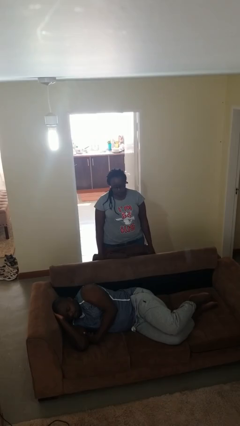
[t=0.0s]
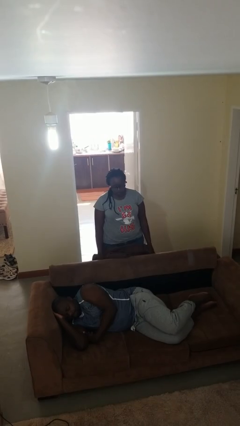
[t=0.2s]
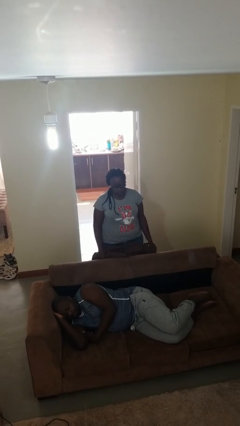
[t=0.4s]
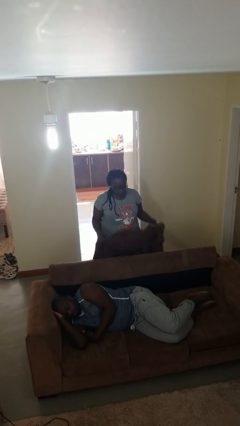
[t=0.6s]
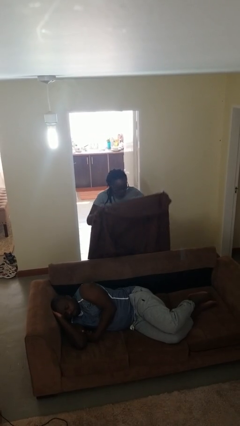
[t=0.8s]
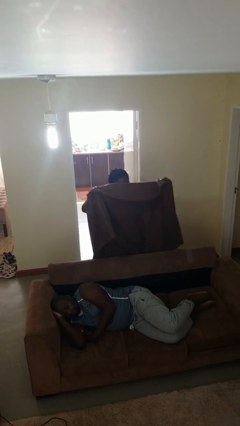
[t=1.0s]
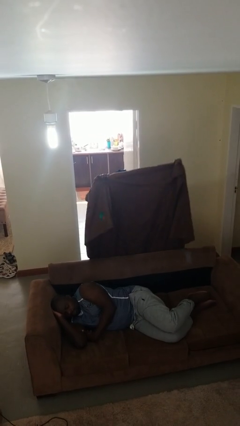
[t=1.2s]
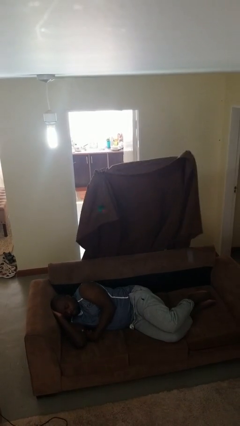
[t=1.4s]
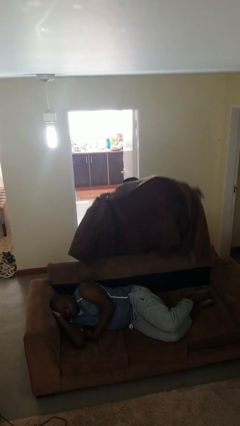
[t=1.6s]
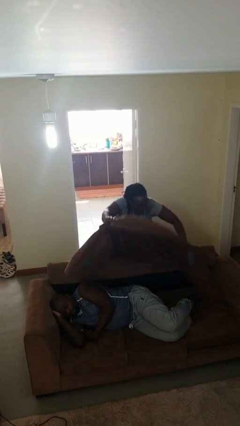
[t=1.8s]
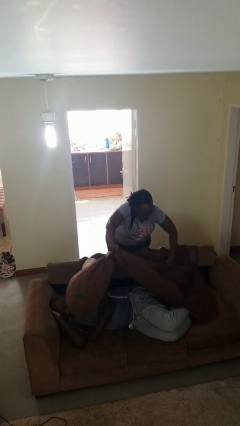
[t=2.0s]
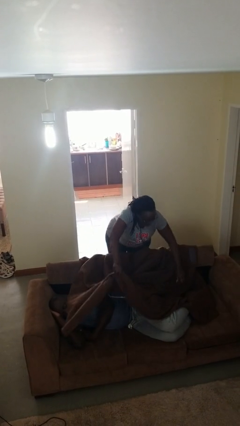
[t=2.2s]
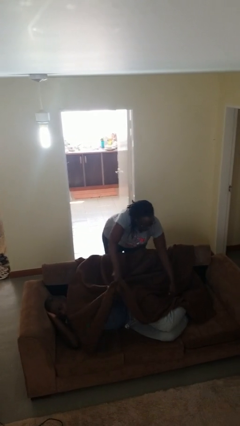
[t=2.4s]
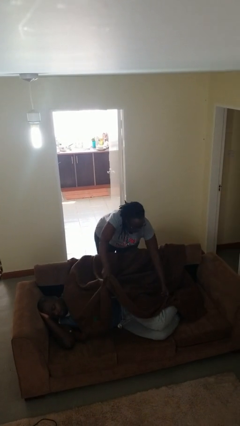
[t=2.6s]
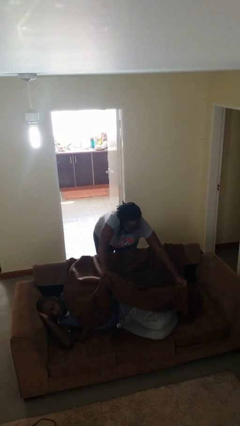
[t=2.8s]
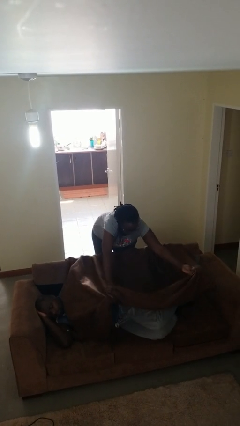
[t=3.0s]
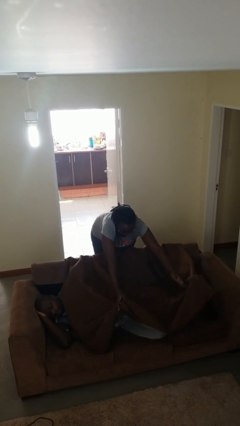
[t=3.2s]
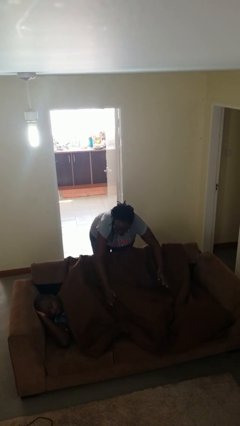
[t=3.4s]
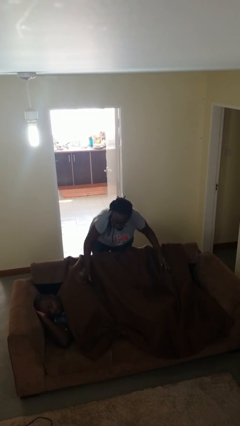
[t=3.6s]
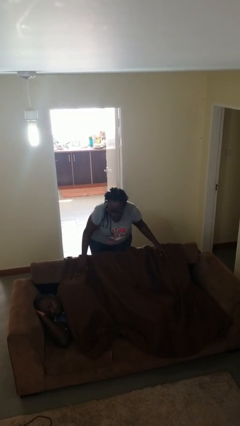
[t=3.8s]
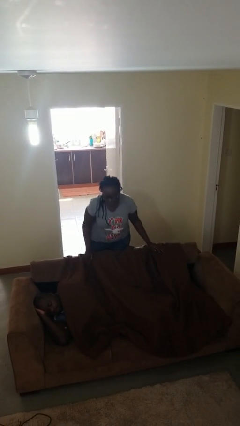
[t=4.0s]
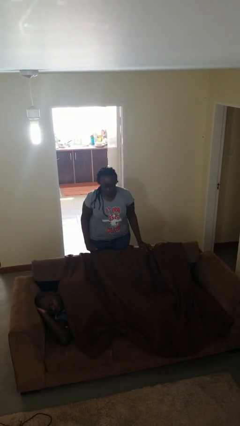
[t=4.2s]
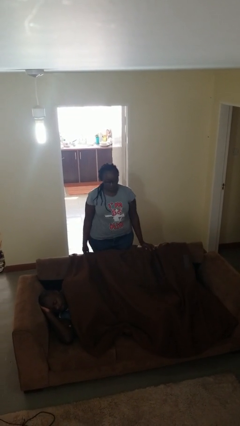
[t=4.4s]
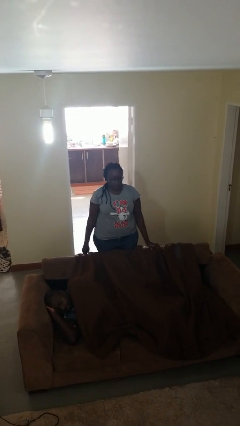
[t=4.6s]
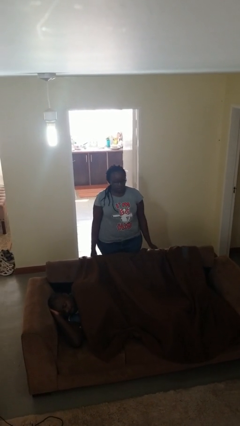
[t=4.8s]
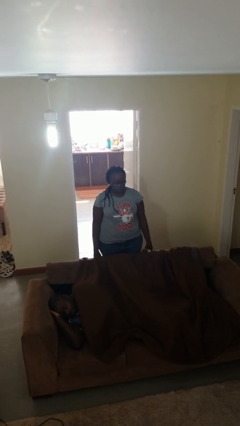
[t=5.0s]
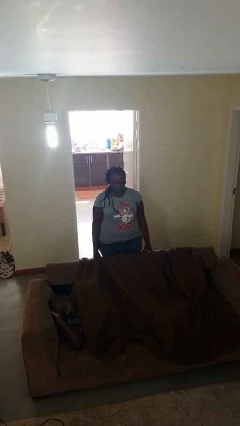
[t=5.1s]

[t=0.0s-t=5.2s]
person covers friend with blanket

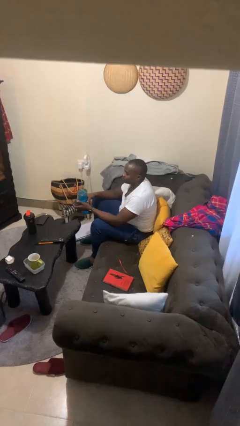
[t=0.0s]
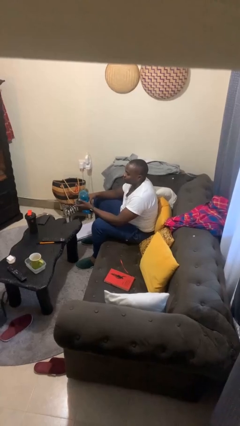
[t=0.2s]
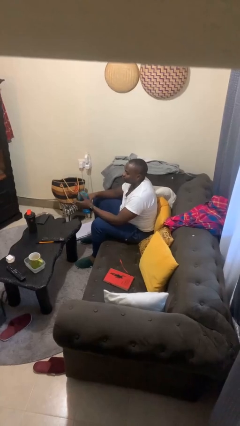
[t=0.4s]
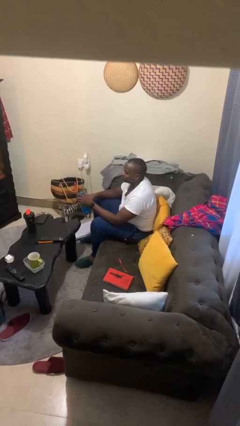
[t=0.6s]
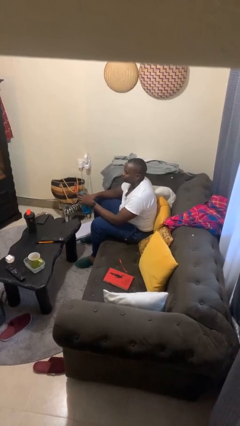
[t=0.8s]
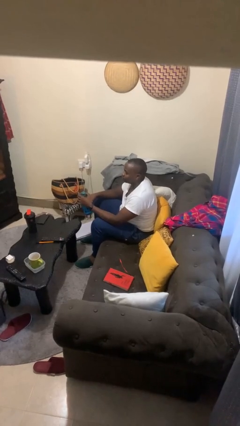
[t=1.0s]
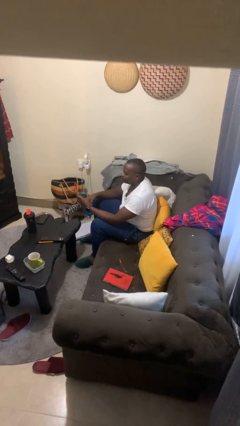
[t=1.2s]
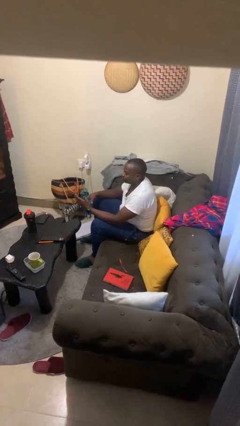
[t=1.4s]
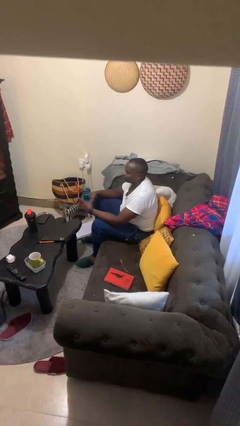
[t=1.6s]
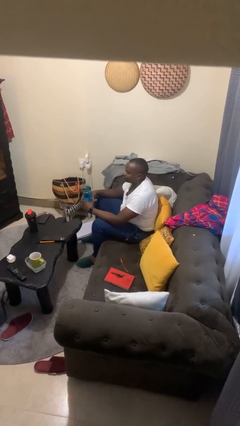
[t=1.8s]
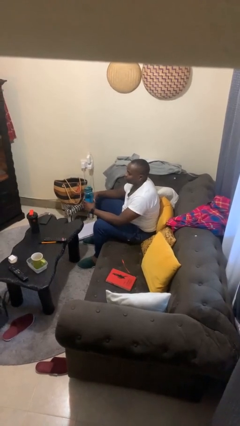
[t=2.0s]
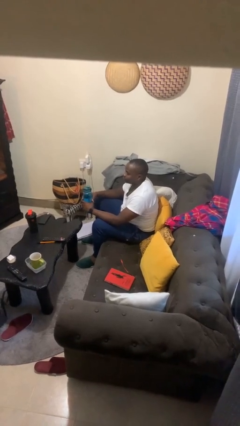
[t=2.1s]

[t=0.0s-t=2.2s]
person screws lid to bottle

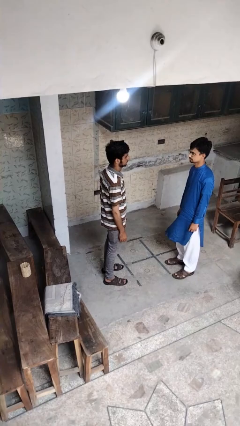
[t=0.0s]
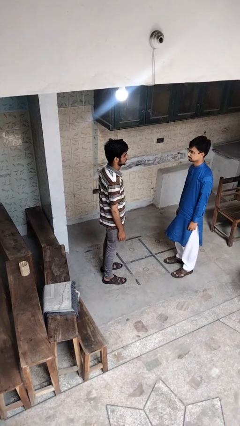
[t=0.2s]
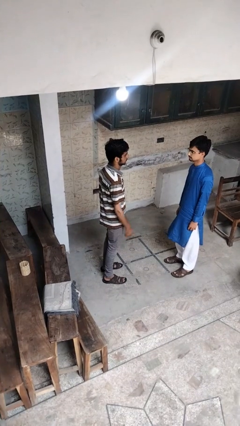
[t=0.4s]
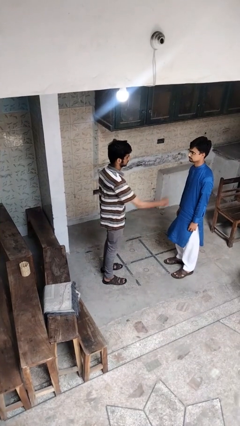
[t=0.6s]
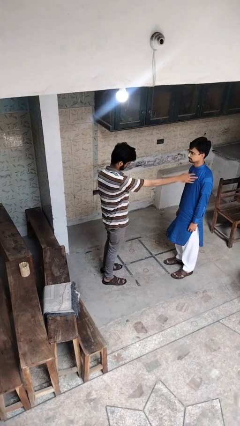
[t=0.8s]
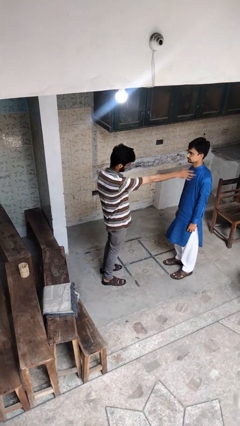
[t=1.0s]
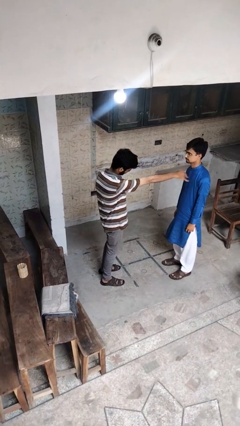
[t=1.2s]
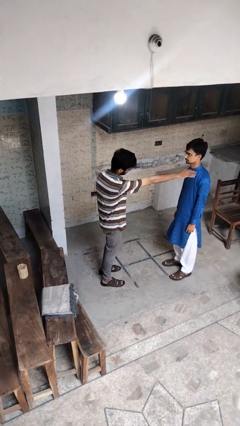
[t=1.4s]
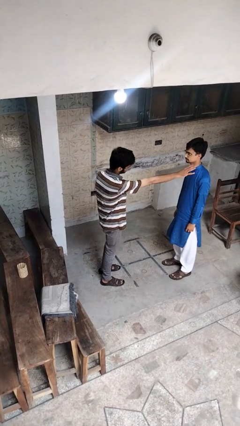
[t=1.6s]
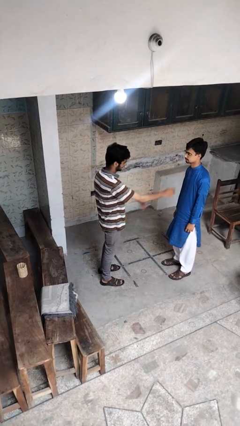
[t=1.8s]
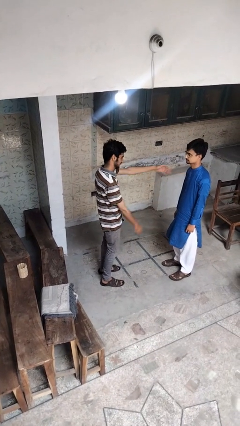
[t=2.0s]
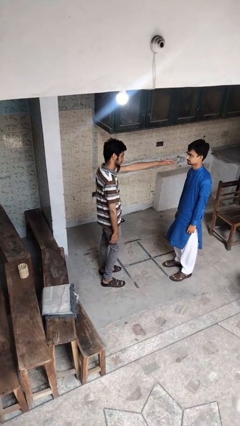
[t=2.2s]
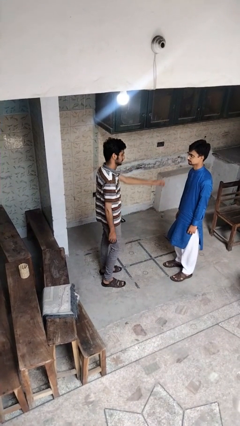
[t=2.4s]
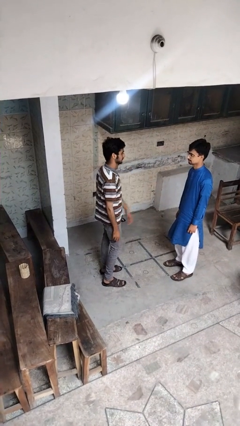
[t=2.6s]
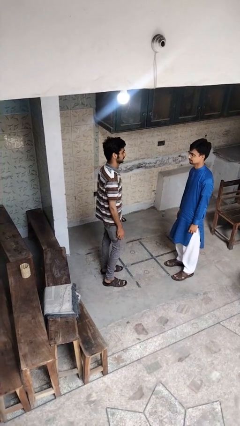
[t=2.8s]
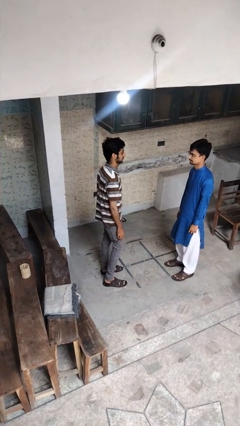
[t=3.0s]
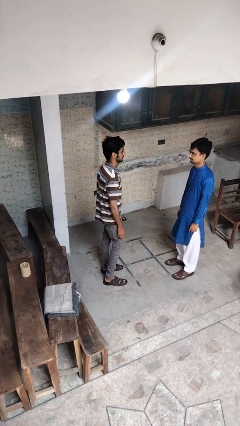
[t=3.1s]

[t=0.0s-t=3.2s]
person shoves person

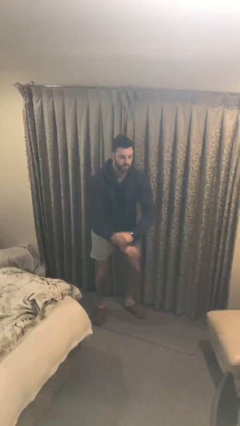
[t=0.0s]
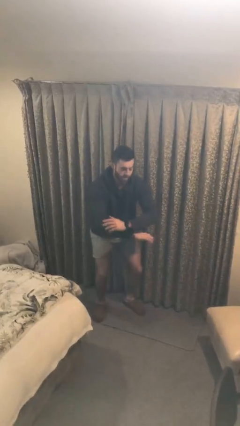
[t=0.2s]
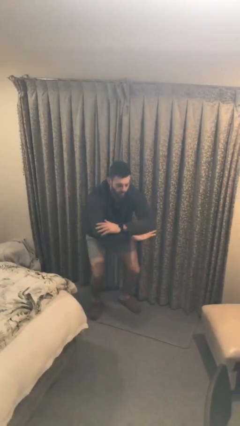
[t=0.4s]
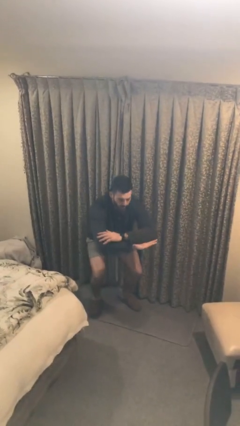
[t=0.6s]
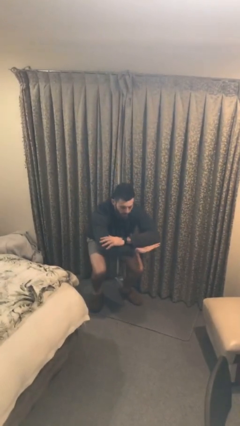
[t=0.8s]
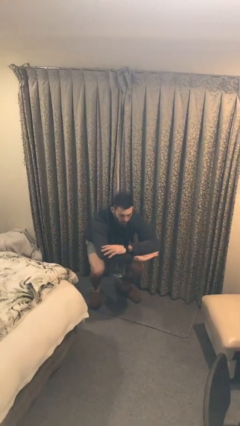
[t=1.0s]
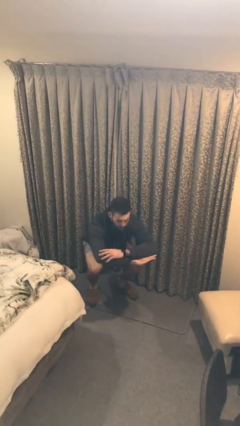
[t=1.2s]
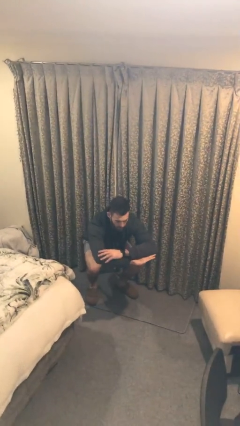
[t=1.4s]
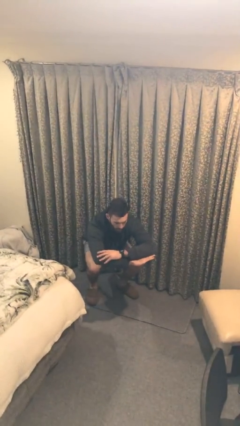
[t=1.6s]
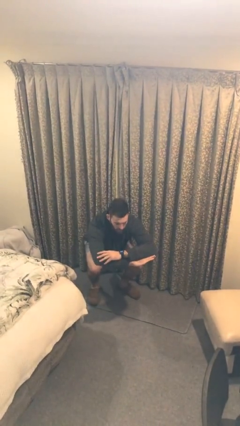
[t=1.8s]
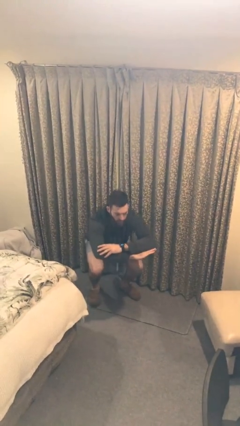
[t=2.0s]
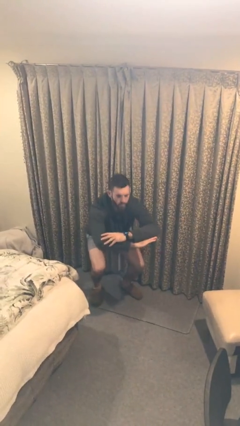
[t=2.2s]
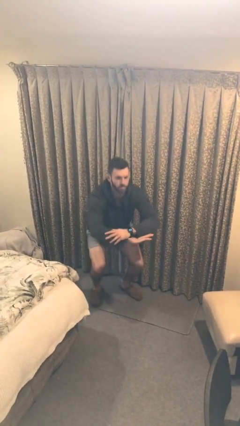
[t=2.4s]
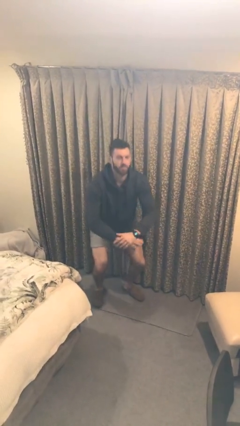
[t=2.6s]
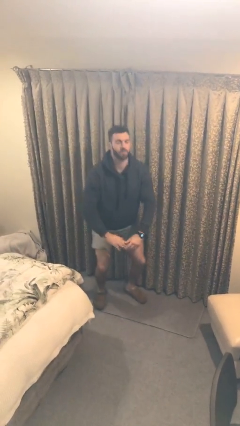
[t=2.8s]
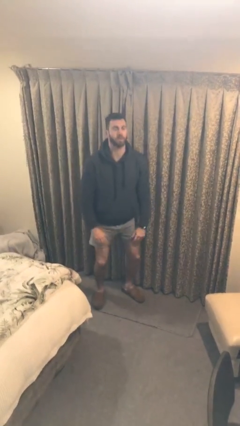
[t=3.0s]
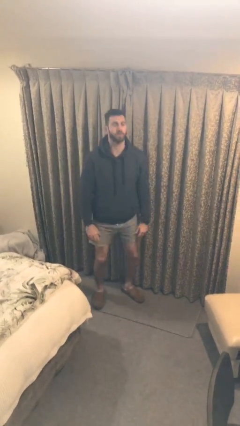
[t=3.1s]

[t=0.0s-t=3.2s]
person squats

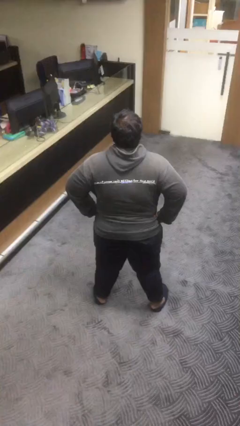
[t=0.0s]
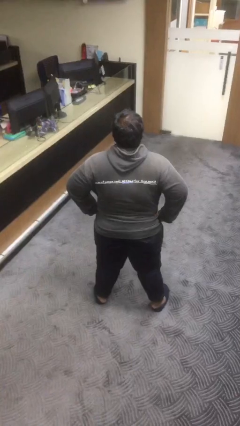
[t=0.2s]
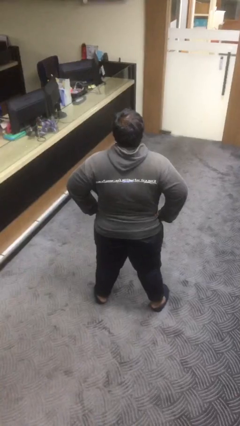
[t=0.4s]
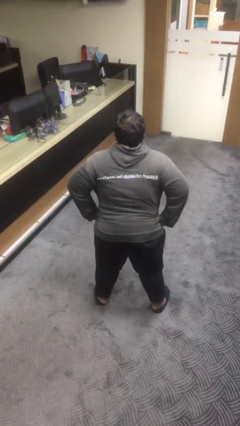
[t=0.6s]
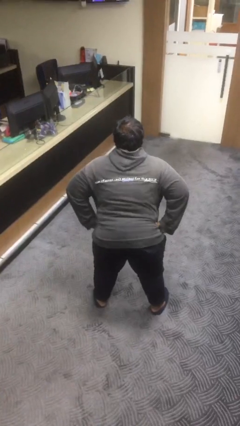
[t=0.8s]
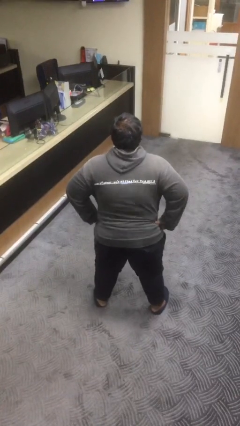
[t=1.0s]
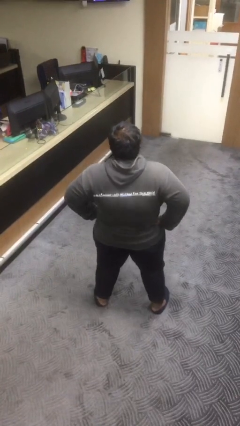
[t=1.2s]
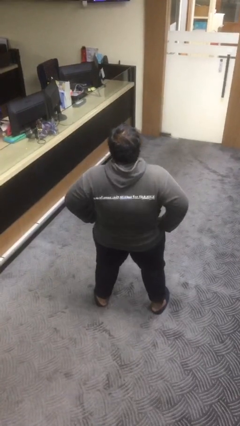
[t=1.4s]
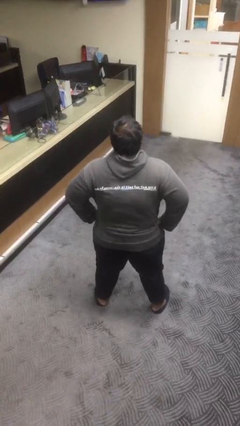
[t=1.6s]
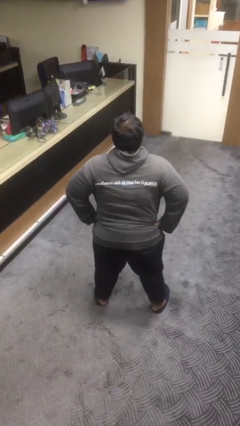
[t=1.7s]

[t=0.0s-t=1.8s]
person wiggles hips

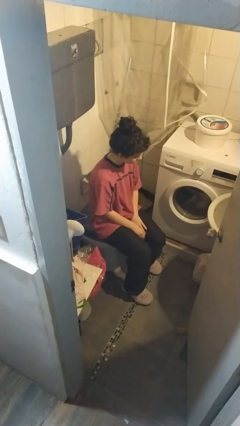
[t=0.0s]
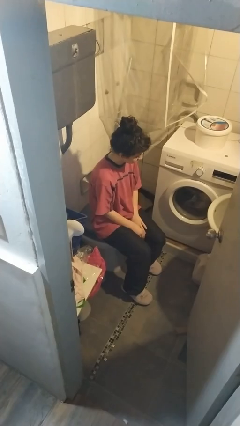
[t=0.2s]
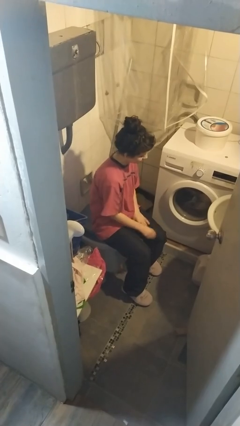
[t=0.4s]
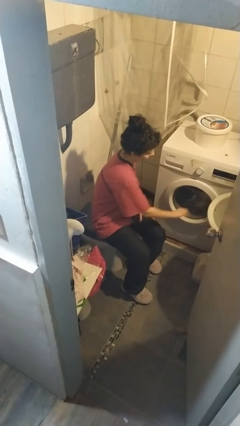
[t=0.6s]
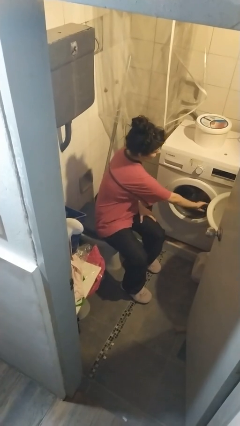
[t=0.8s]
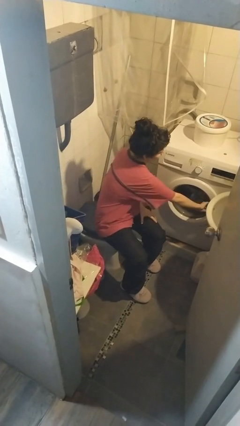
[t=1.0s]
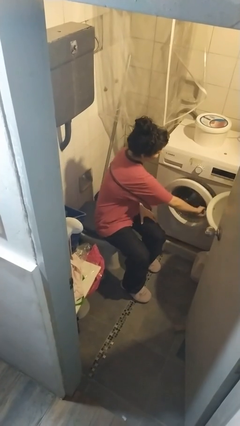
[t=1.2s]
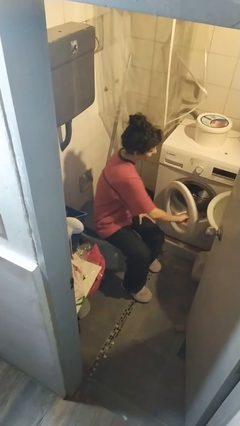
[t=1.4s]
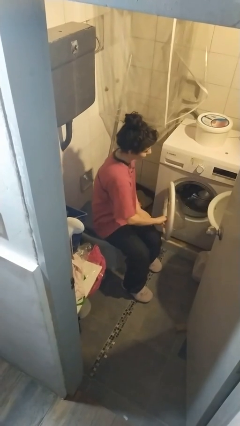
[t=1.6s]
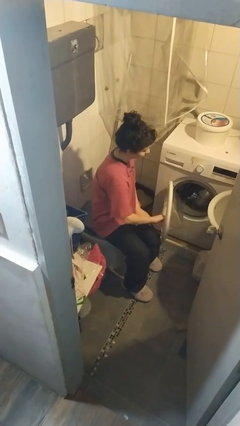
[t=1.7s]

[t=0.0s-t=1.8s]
person opens clothes washer
